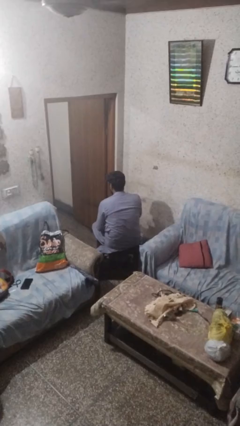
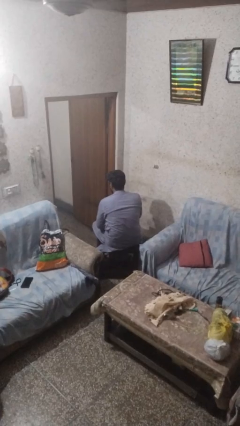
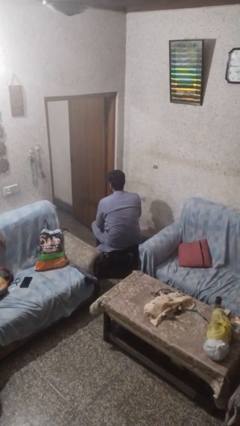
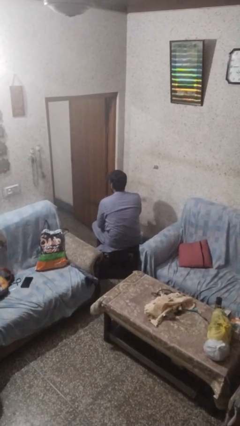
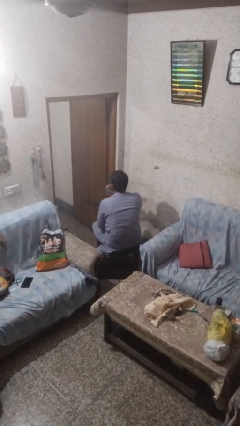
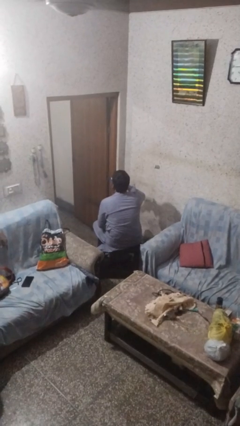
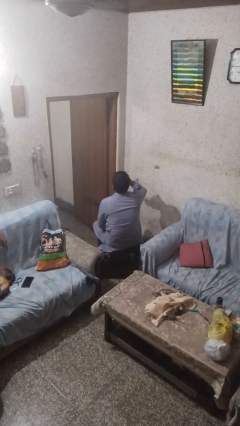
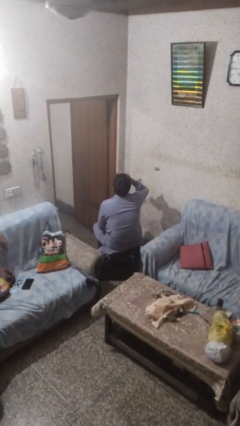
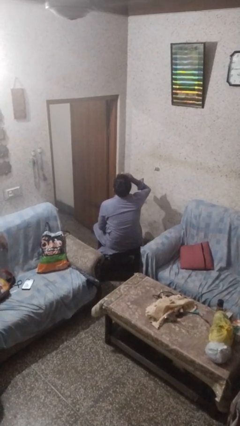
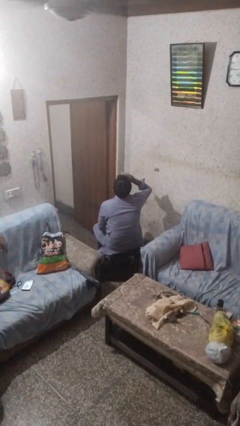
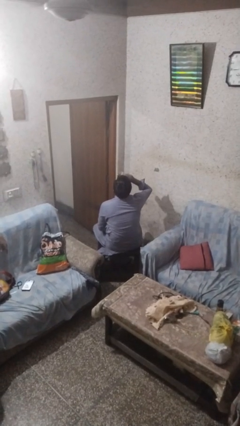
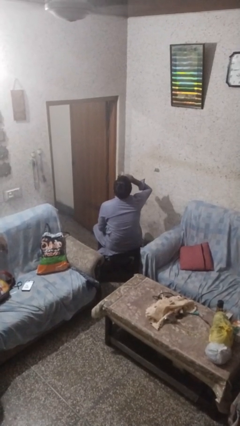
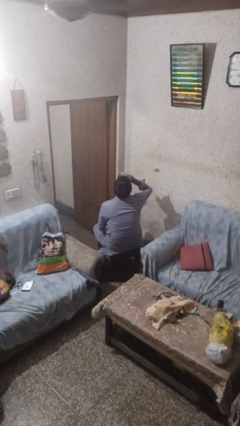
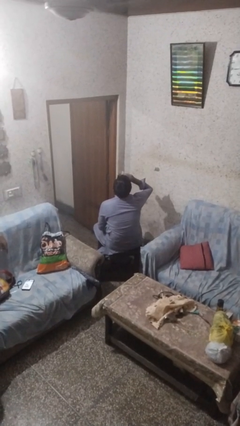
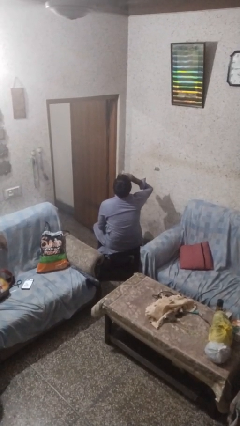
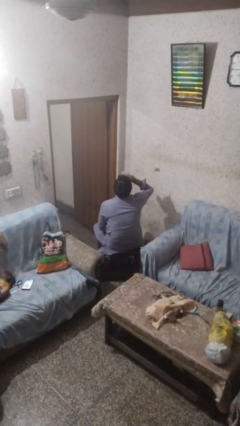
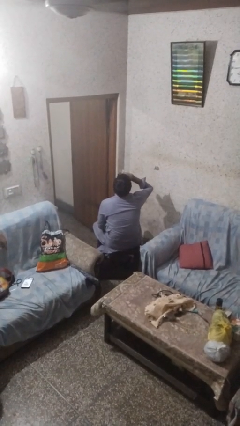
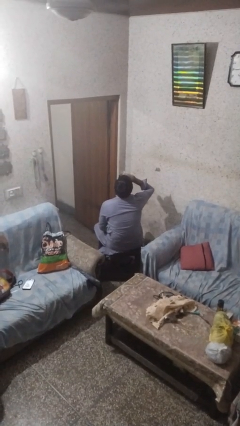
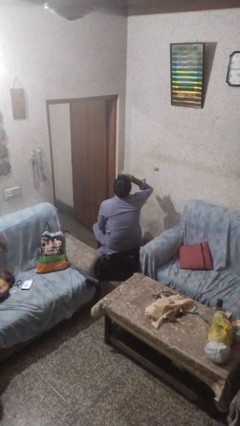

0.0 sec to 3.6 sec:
person drinks from beverage can

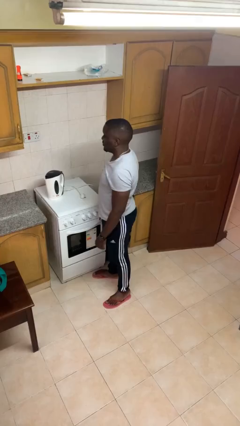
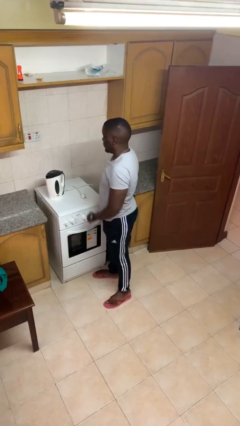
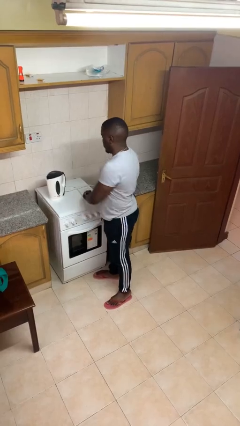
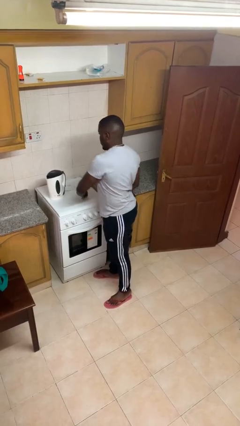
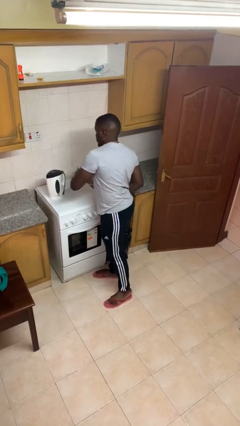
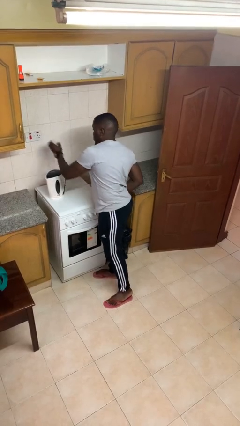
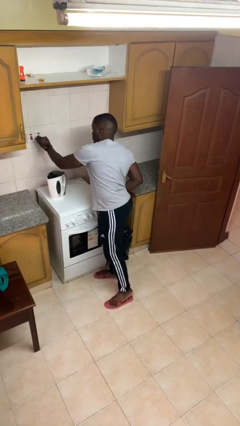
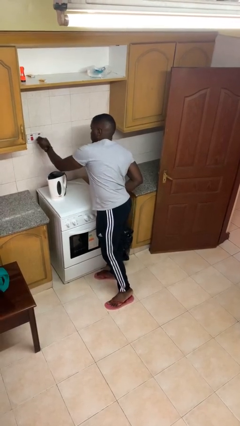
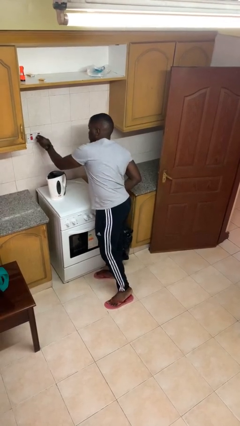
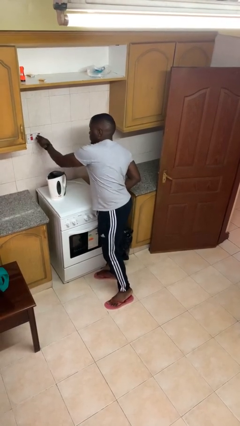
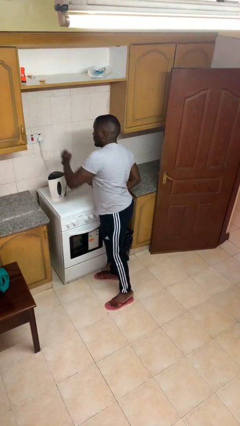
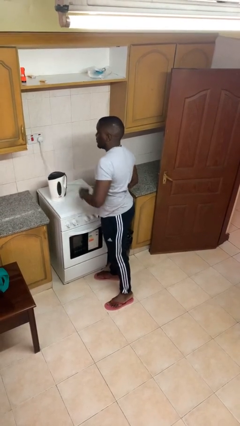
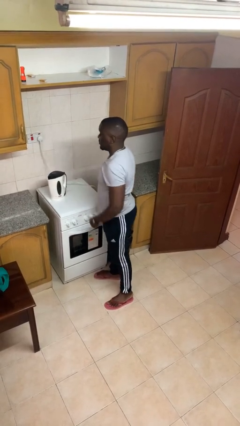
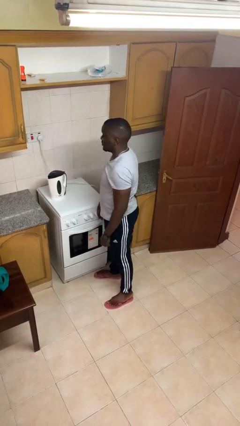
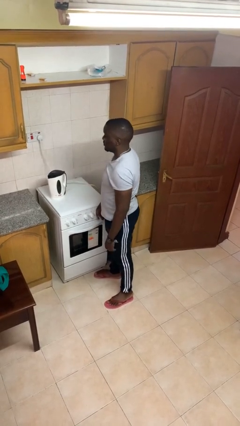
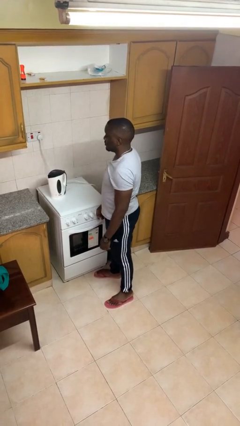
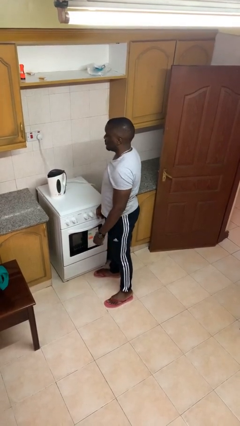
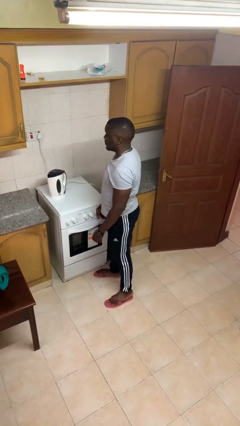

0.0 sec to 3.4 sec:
person plugs into electrical socket

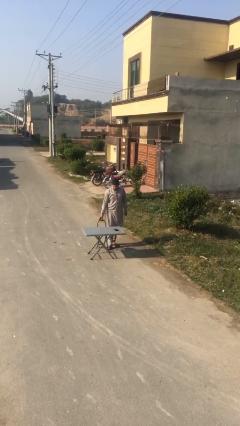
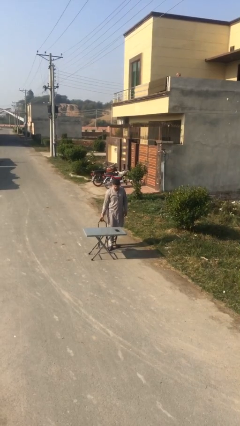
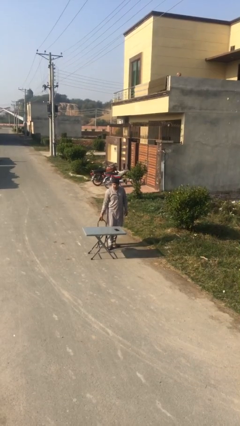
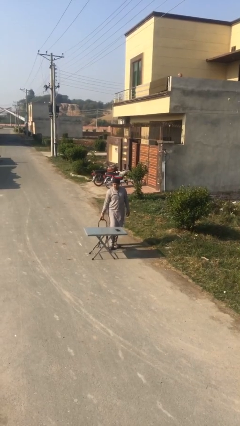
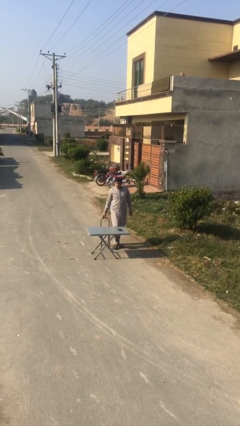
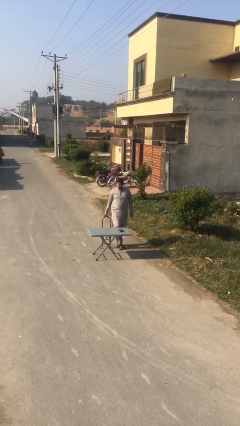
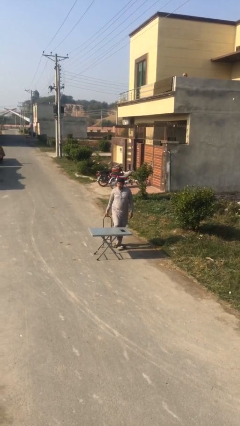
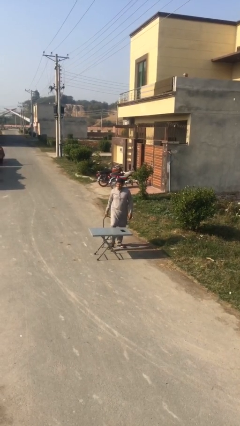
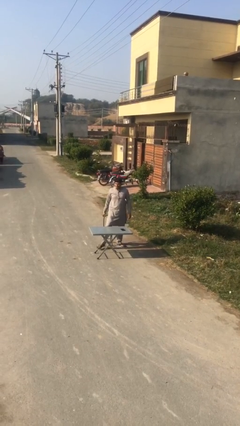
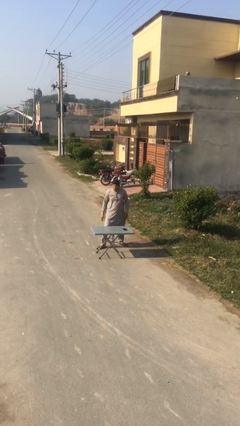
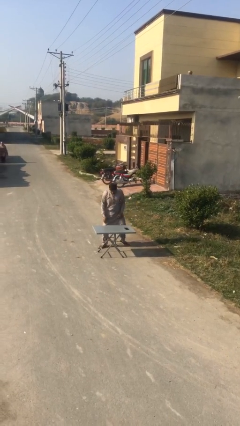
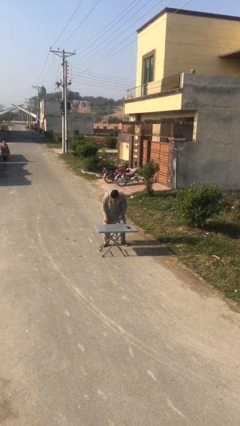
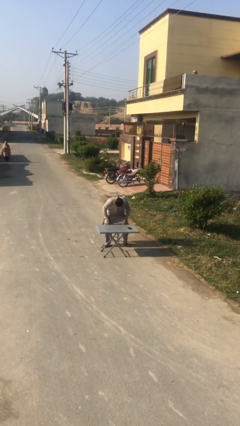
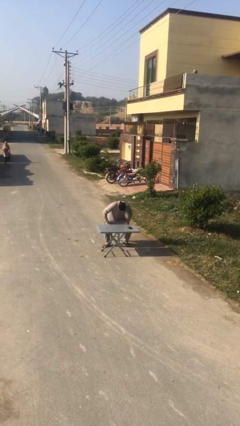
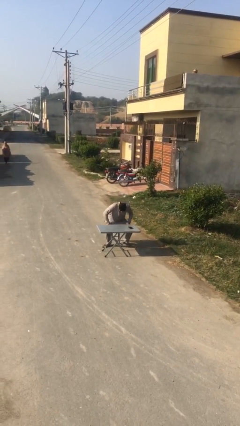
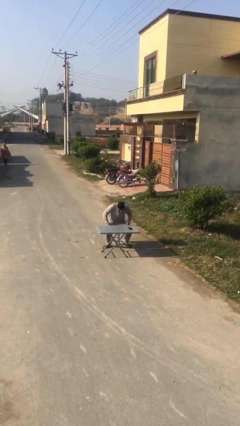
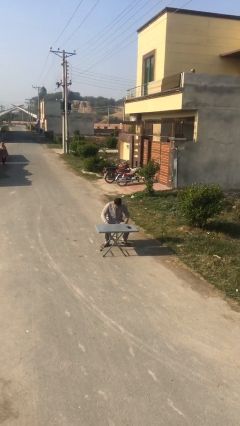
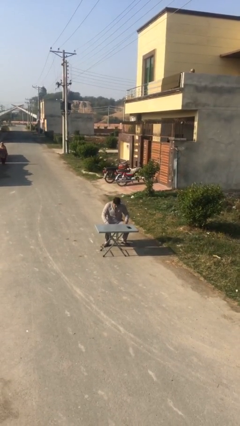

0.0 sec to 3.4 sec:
person sits down

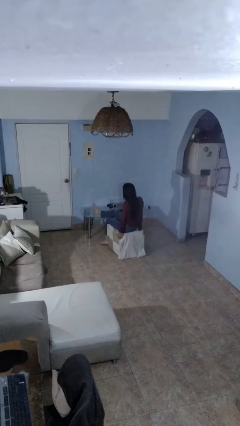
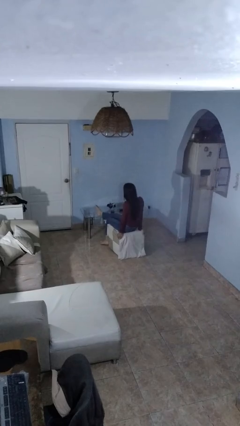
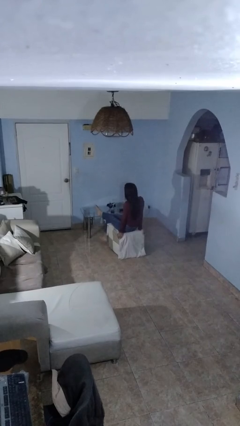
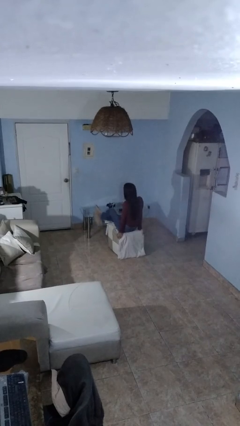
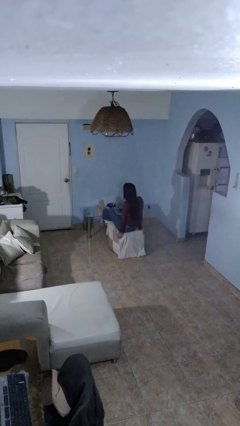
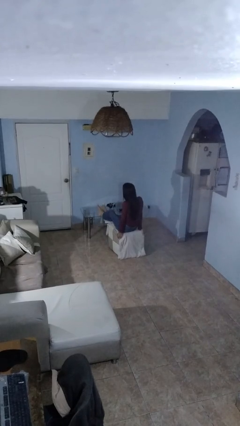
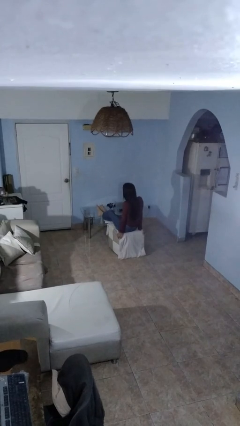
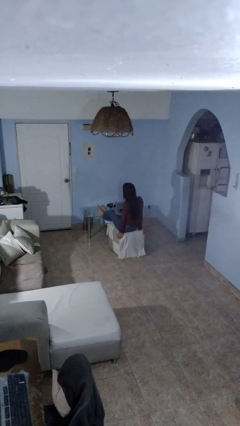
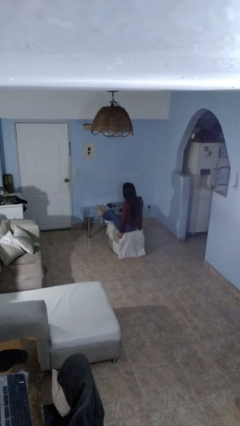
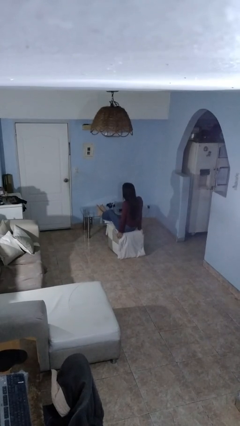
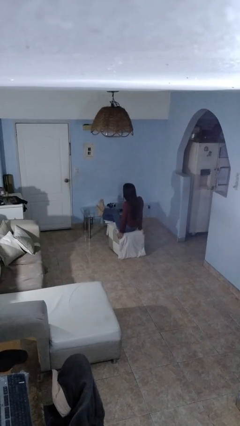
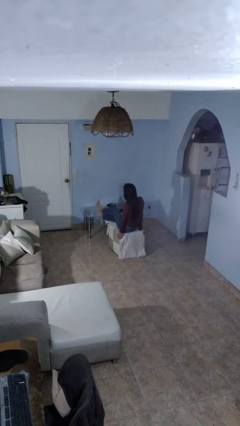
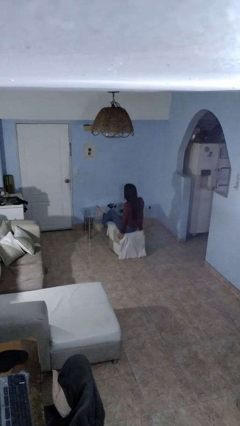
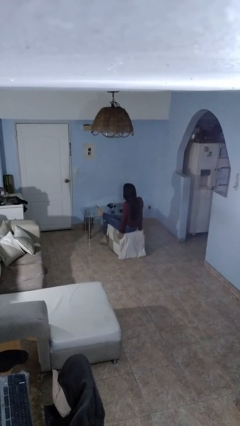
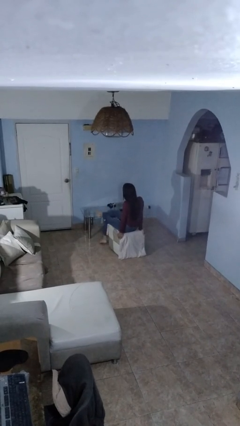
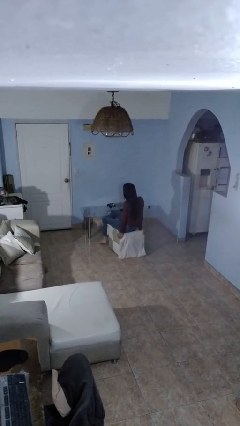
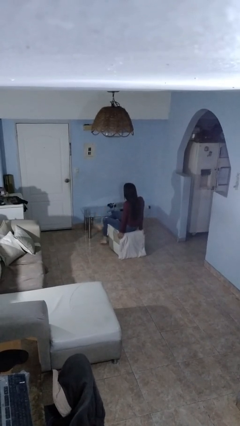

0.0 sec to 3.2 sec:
person puts feet up

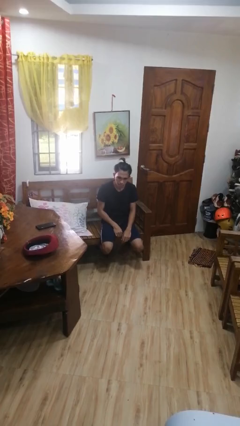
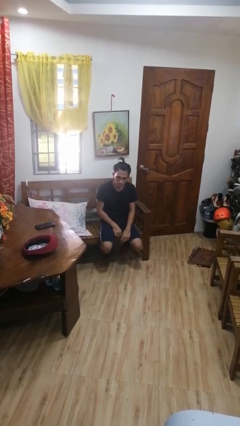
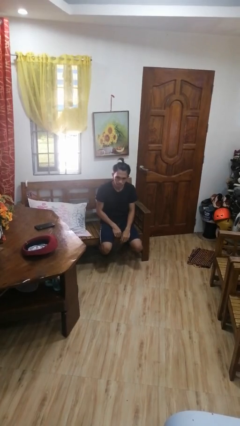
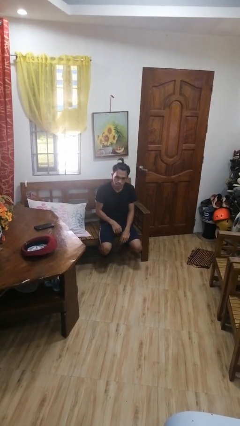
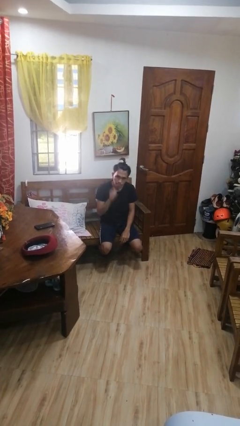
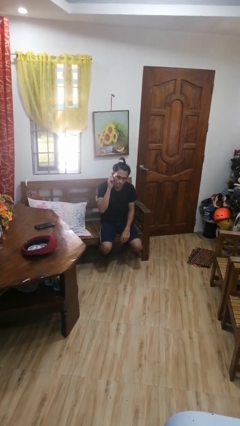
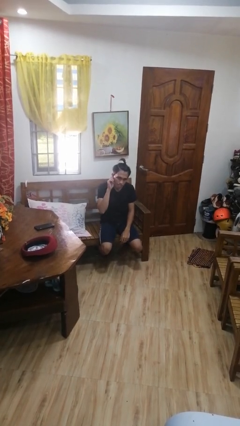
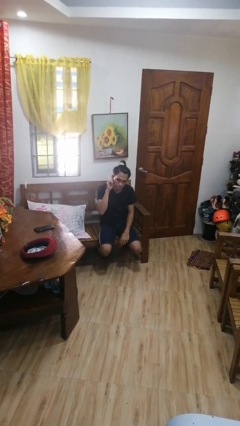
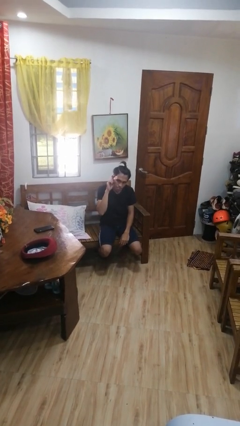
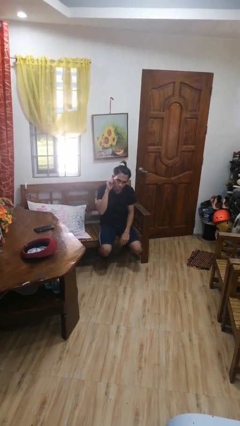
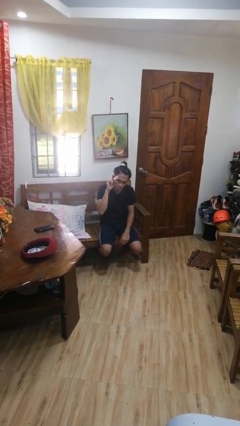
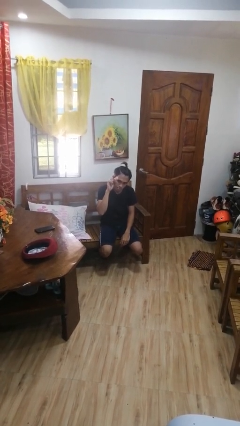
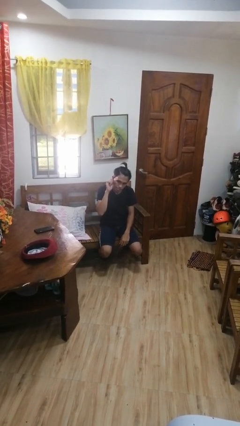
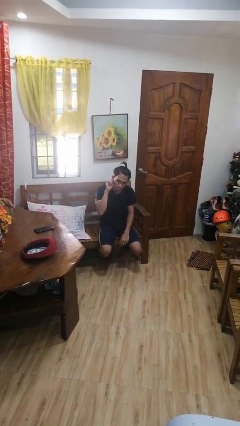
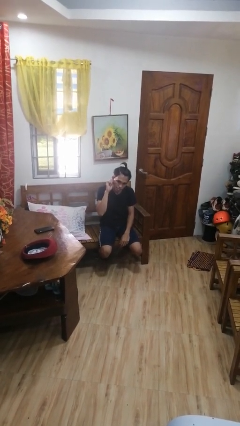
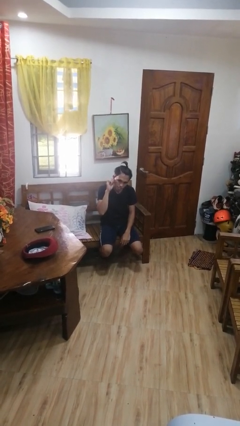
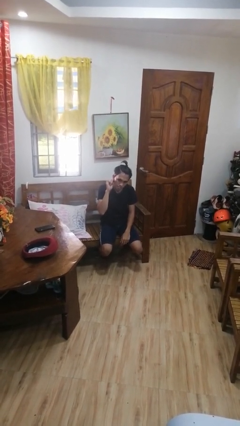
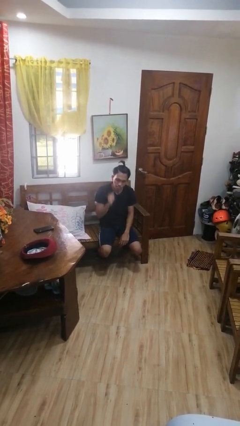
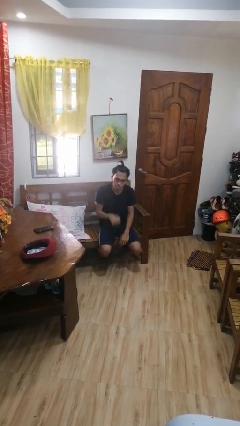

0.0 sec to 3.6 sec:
person touches earlobe

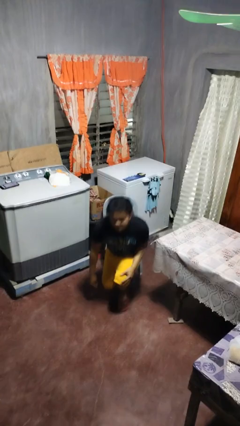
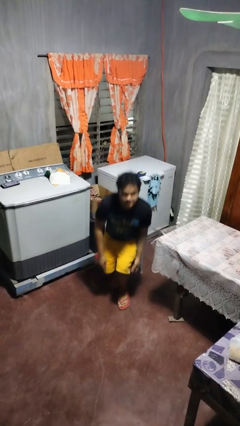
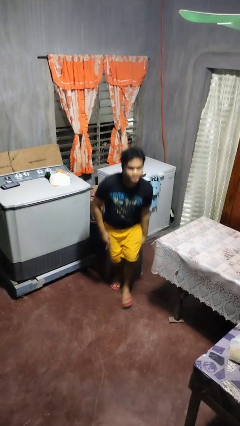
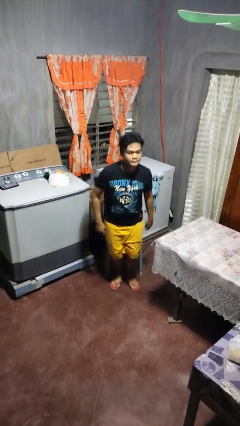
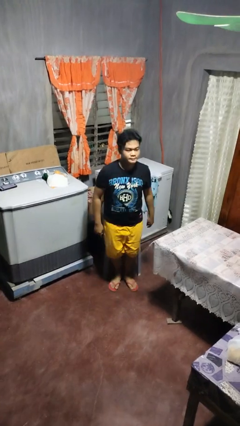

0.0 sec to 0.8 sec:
person stands up from floor
